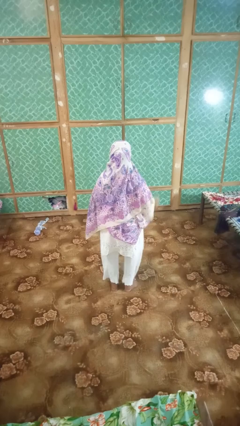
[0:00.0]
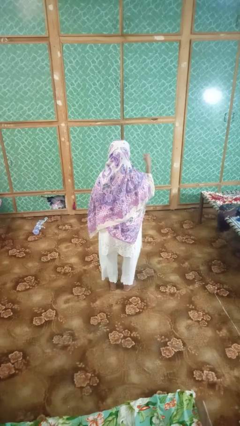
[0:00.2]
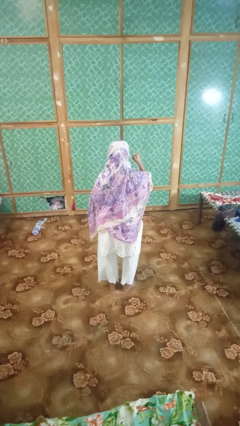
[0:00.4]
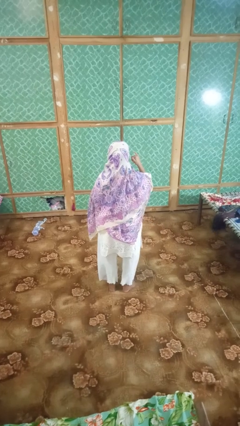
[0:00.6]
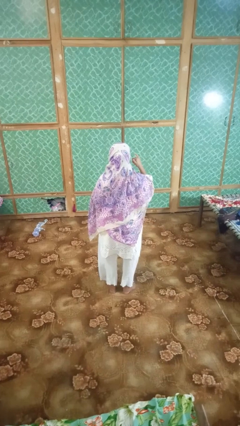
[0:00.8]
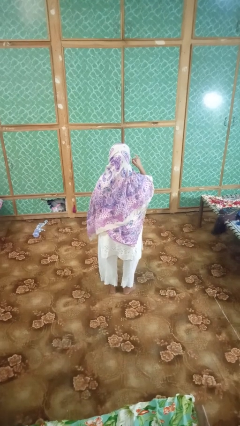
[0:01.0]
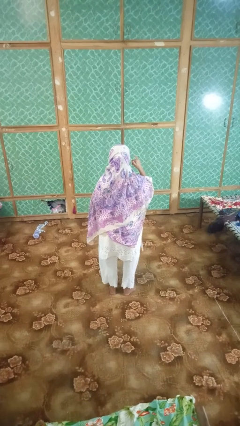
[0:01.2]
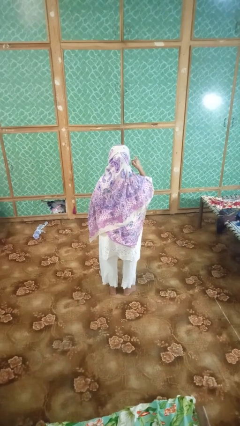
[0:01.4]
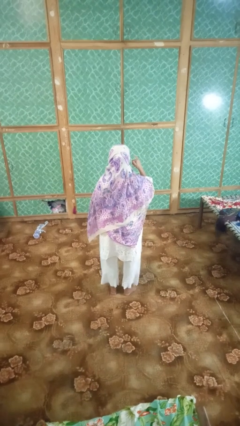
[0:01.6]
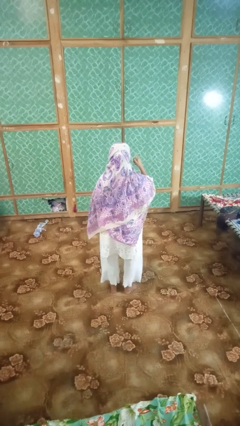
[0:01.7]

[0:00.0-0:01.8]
person gestures call me

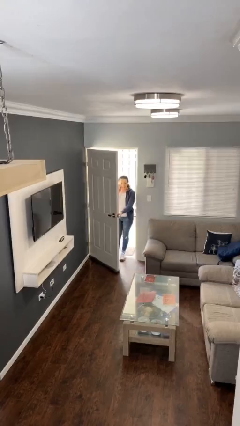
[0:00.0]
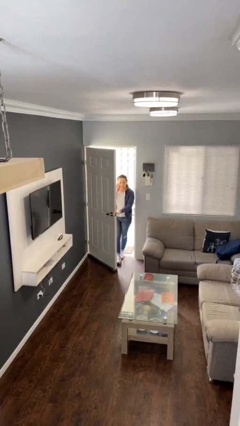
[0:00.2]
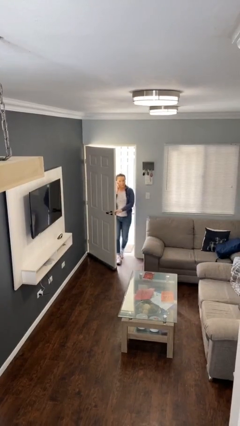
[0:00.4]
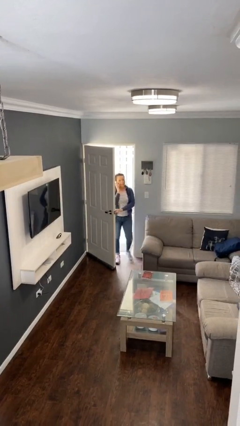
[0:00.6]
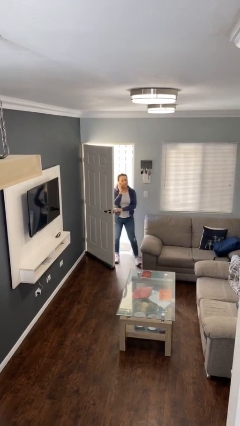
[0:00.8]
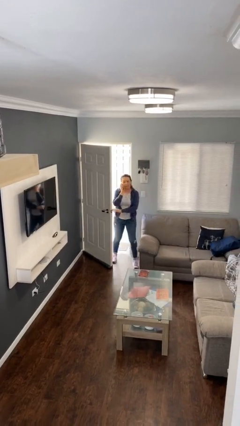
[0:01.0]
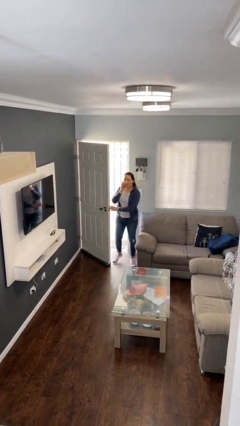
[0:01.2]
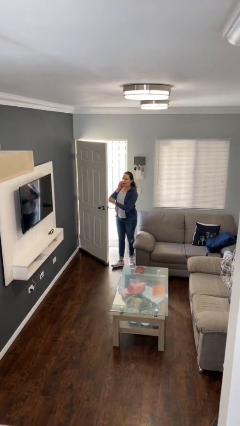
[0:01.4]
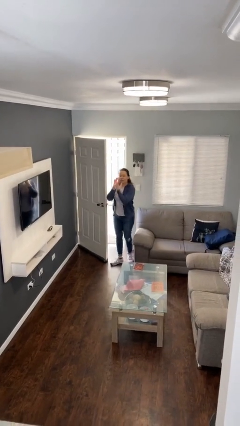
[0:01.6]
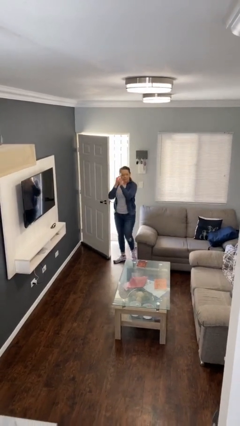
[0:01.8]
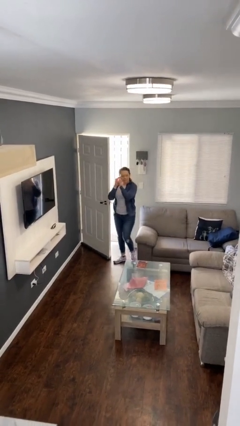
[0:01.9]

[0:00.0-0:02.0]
person enters scene through structure

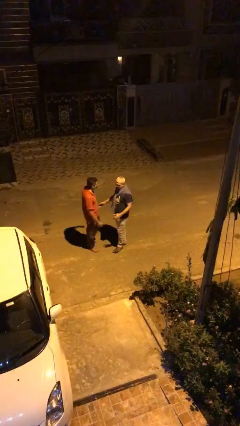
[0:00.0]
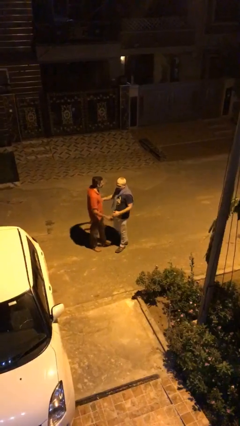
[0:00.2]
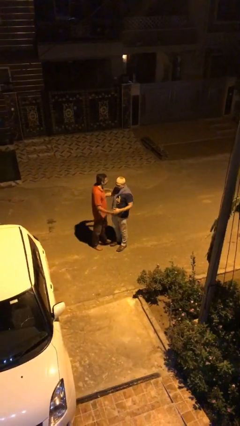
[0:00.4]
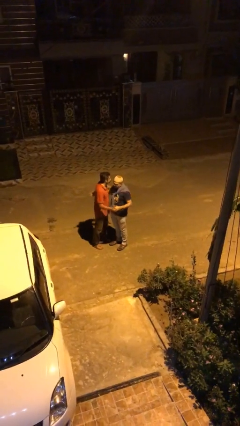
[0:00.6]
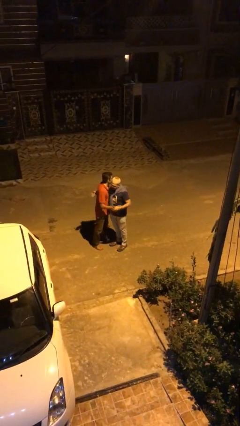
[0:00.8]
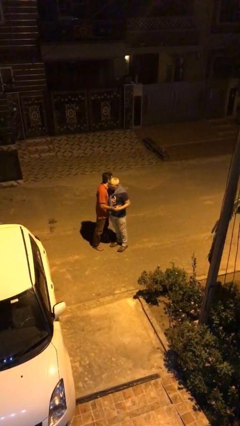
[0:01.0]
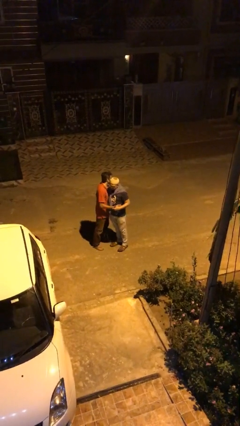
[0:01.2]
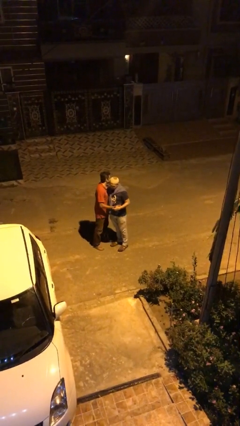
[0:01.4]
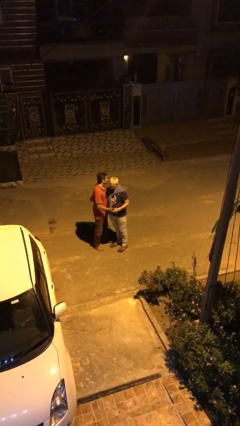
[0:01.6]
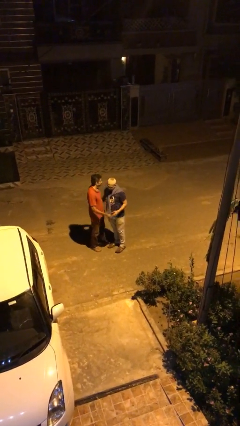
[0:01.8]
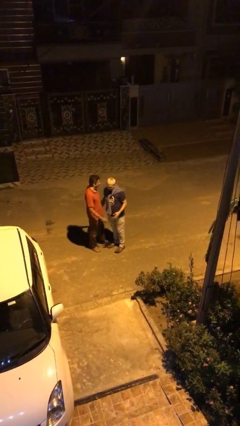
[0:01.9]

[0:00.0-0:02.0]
person embraces person

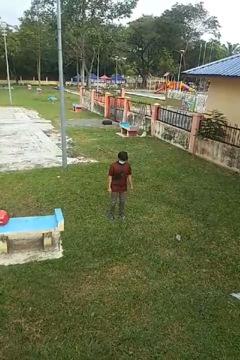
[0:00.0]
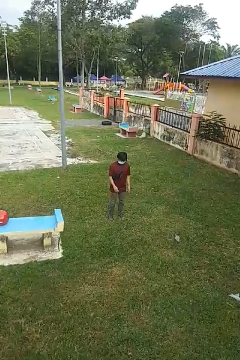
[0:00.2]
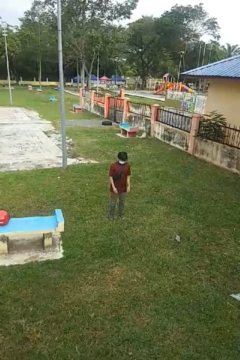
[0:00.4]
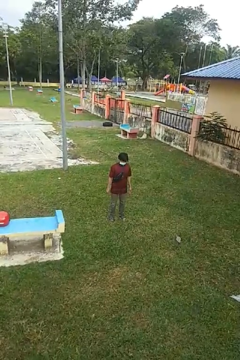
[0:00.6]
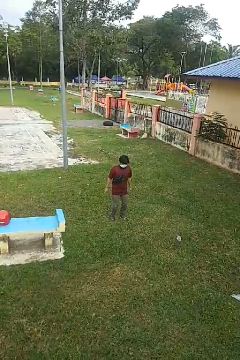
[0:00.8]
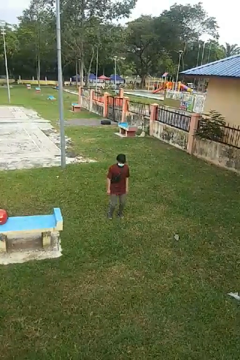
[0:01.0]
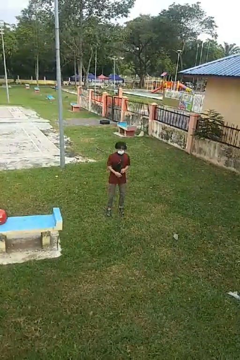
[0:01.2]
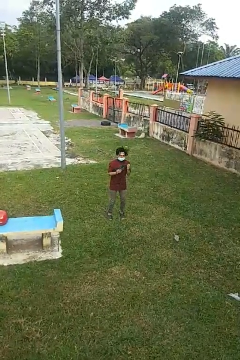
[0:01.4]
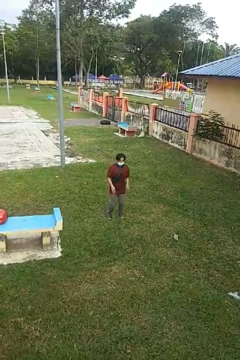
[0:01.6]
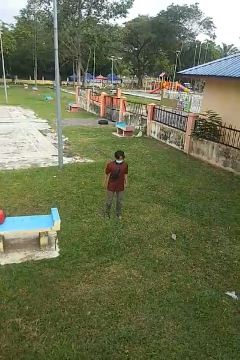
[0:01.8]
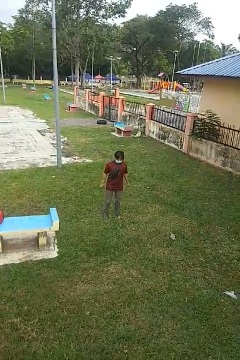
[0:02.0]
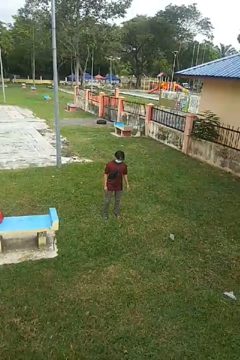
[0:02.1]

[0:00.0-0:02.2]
person jumps

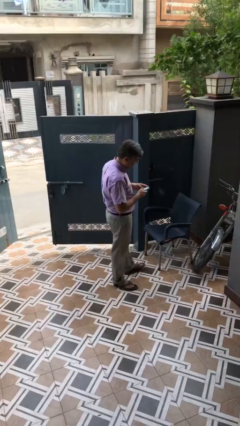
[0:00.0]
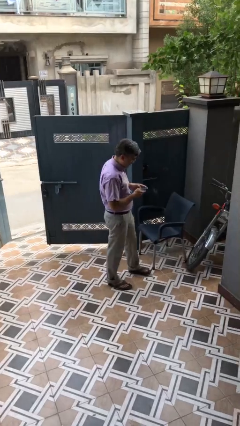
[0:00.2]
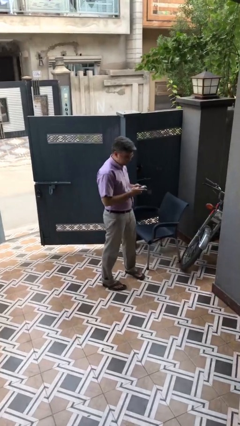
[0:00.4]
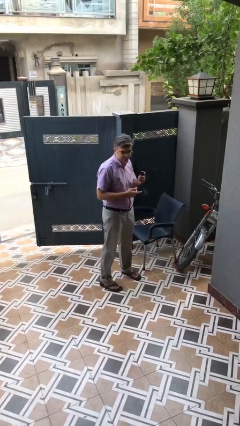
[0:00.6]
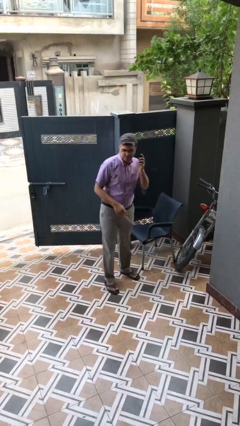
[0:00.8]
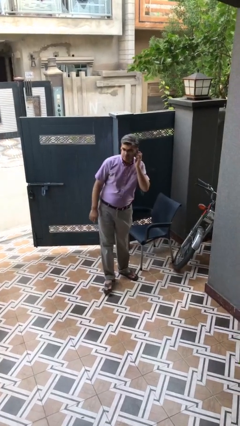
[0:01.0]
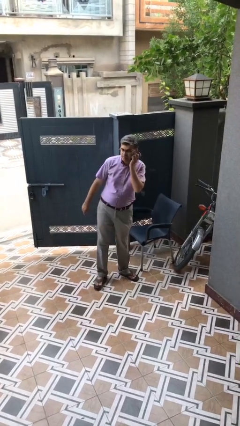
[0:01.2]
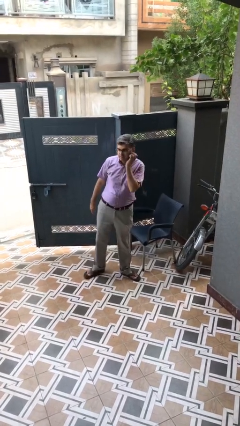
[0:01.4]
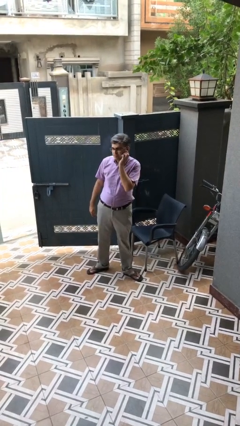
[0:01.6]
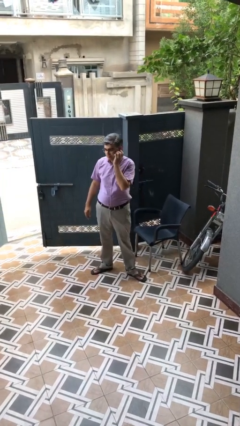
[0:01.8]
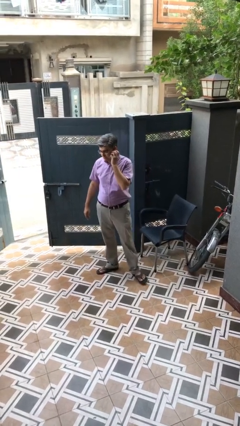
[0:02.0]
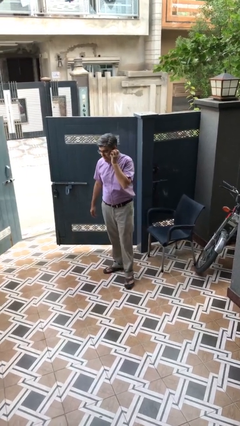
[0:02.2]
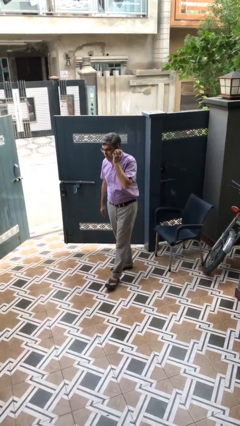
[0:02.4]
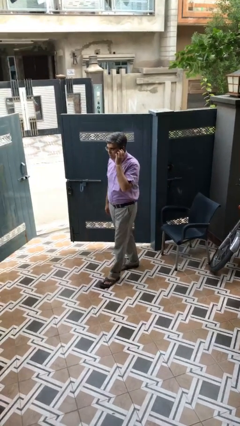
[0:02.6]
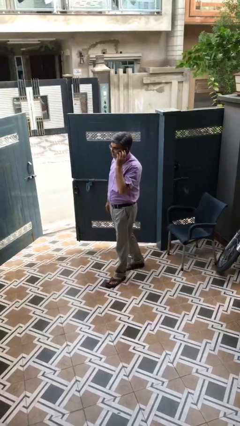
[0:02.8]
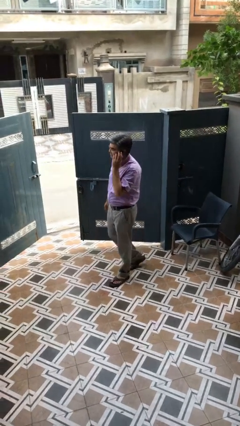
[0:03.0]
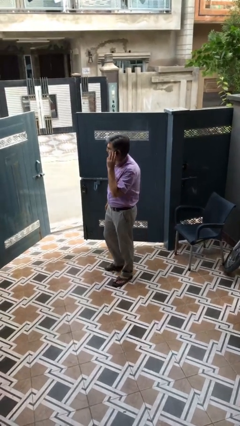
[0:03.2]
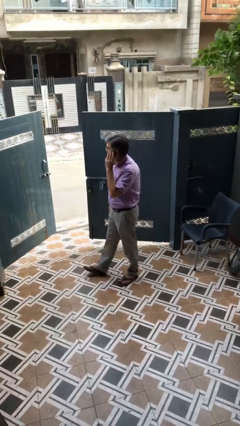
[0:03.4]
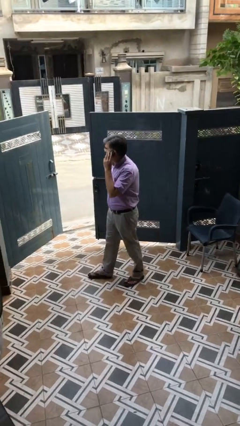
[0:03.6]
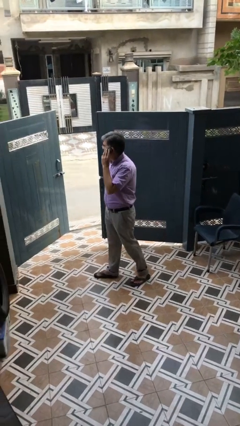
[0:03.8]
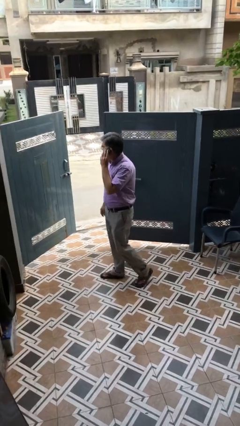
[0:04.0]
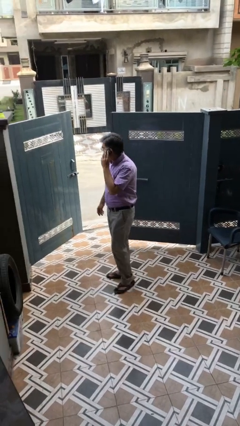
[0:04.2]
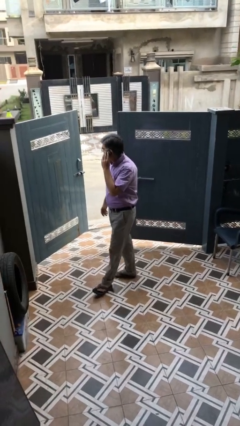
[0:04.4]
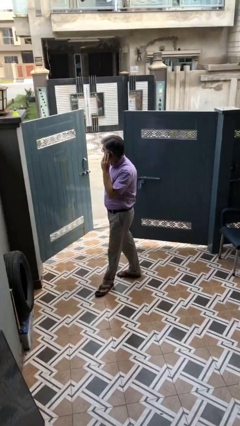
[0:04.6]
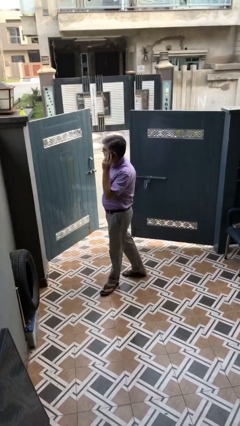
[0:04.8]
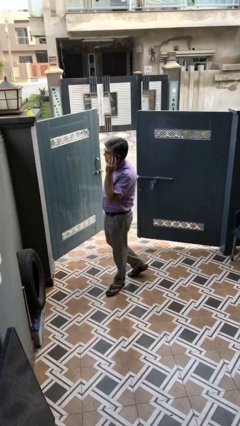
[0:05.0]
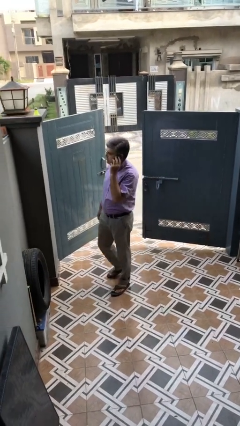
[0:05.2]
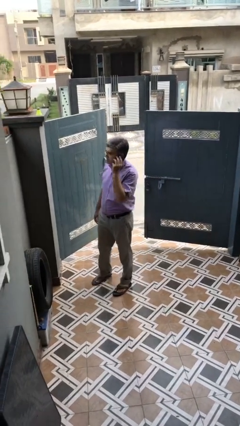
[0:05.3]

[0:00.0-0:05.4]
person talks on phone

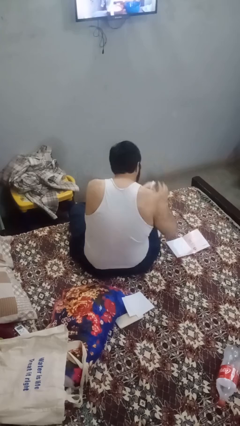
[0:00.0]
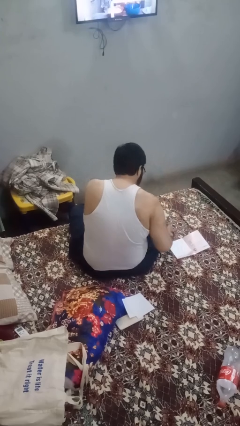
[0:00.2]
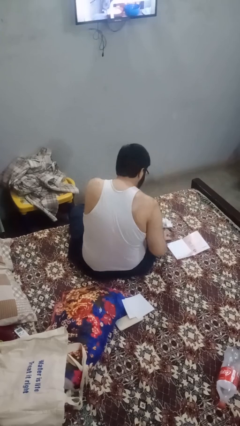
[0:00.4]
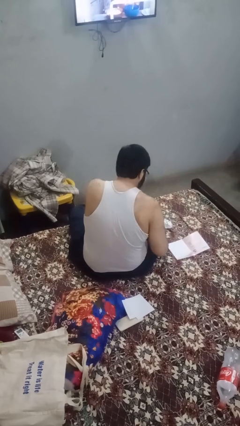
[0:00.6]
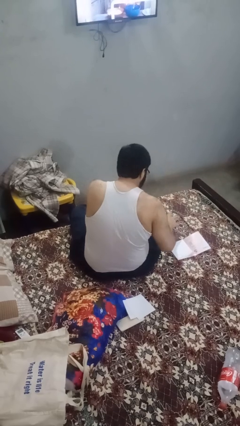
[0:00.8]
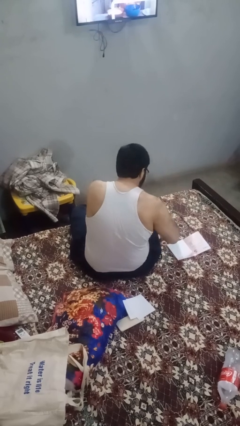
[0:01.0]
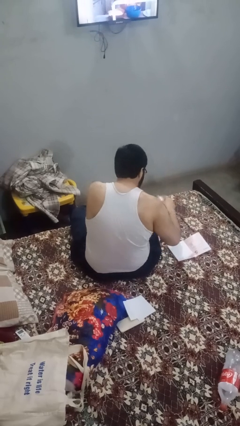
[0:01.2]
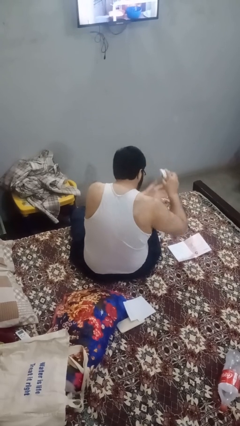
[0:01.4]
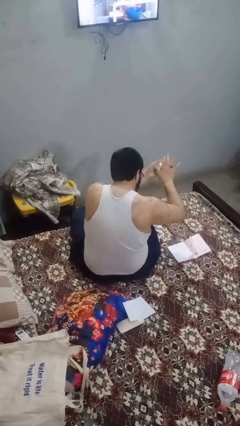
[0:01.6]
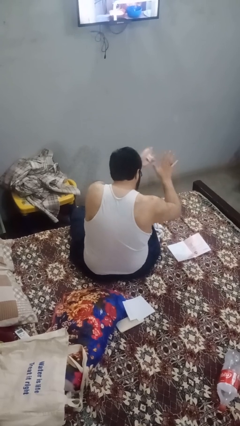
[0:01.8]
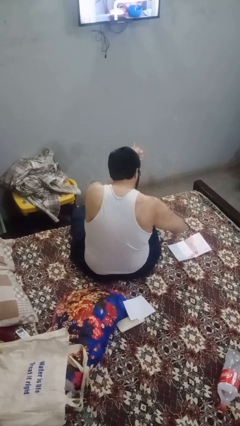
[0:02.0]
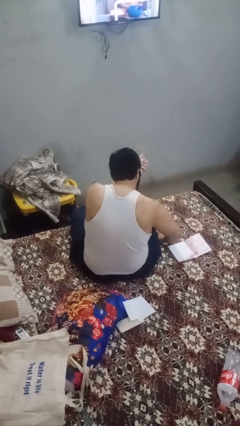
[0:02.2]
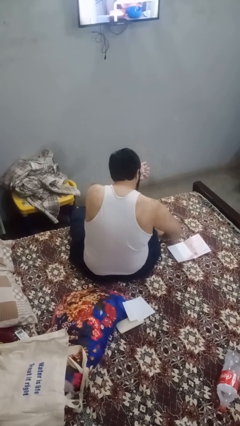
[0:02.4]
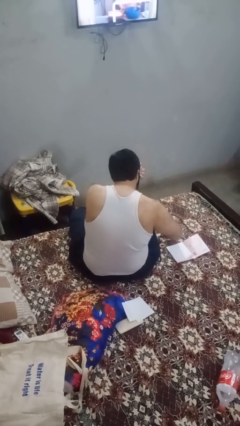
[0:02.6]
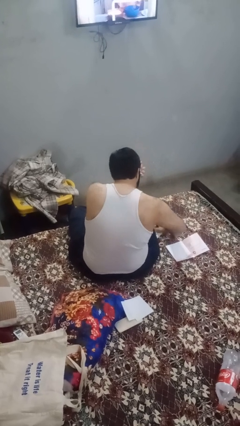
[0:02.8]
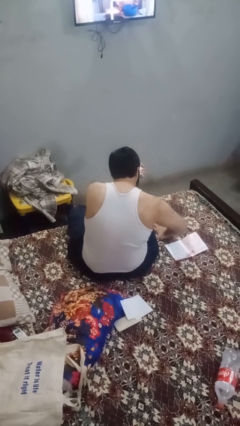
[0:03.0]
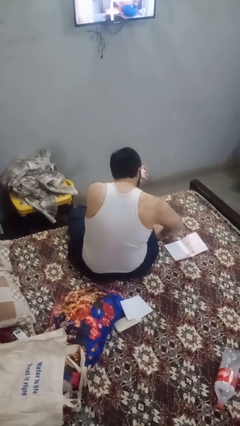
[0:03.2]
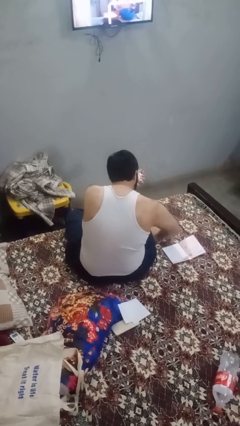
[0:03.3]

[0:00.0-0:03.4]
person crumples paper

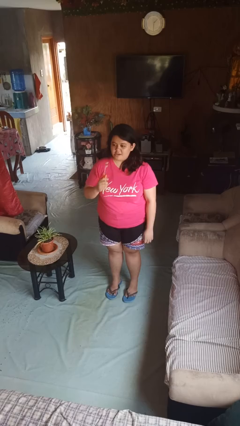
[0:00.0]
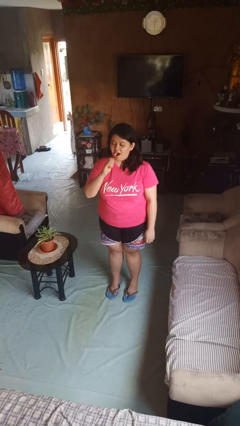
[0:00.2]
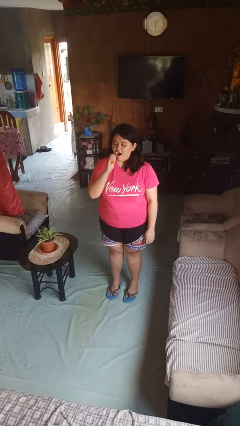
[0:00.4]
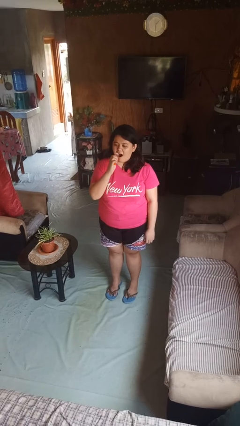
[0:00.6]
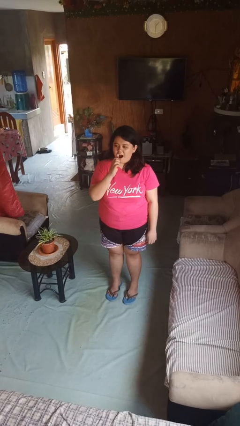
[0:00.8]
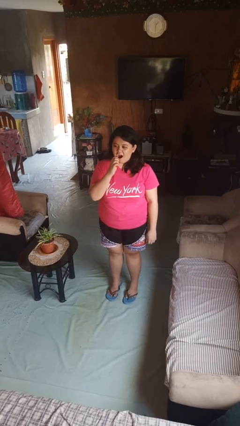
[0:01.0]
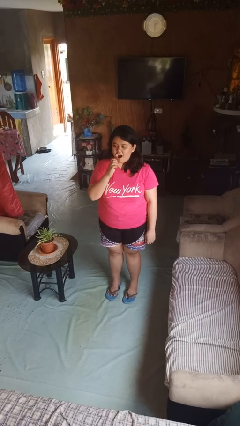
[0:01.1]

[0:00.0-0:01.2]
person brushes teeth
